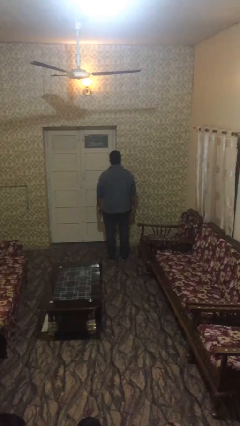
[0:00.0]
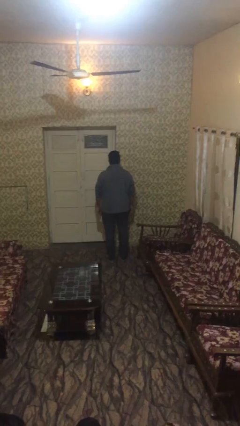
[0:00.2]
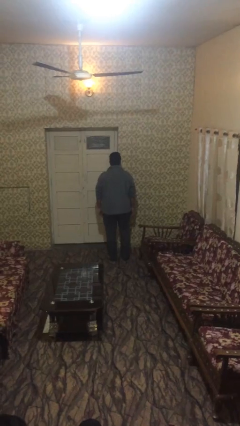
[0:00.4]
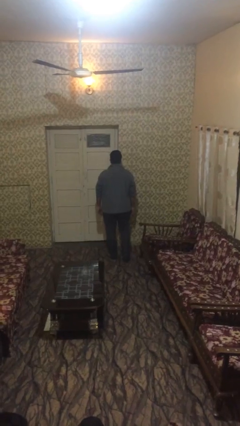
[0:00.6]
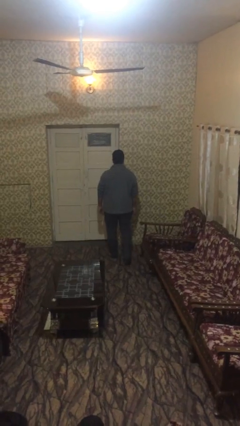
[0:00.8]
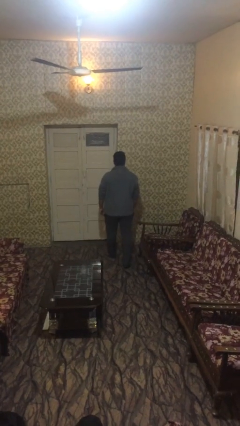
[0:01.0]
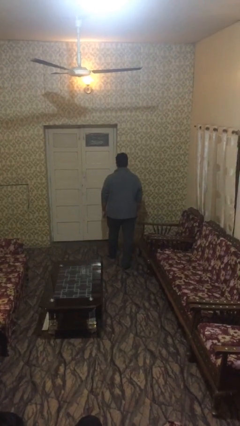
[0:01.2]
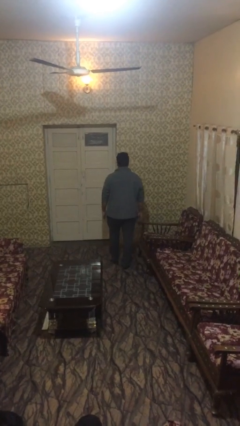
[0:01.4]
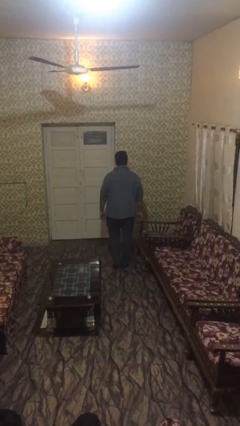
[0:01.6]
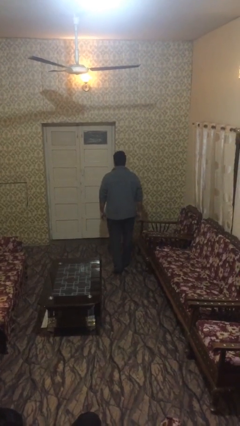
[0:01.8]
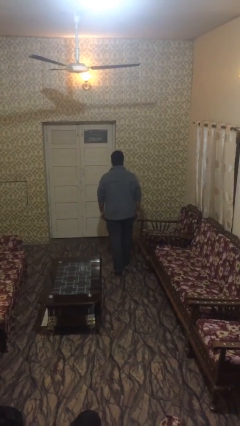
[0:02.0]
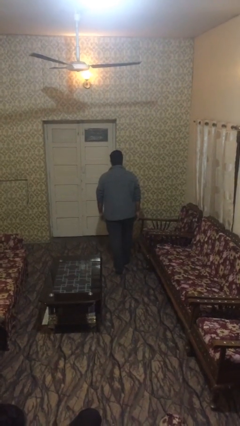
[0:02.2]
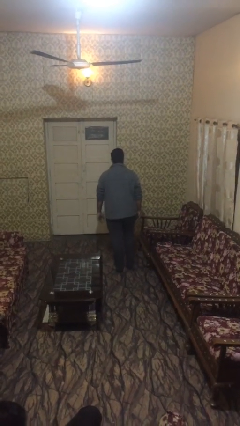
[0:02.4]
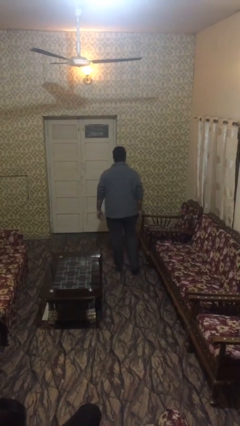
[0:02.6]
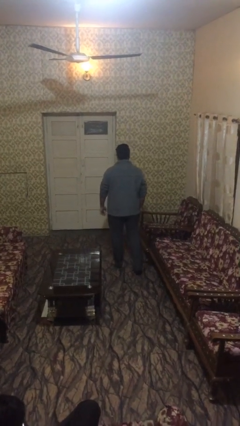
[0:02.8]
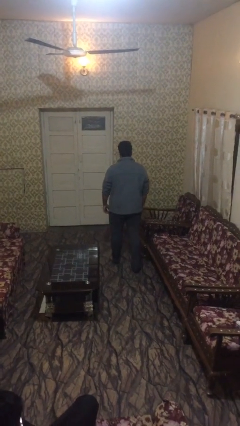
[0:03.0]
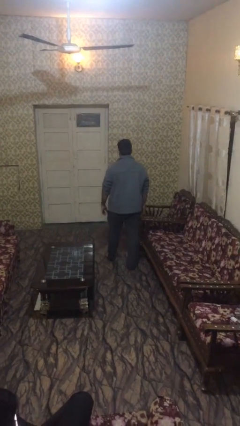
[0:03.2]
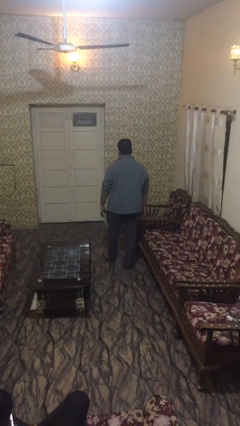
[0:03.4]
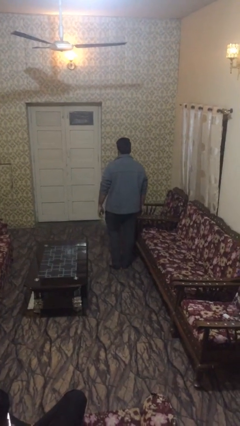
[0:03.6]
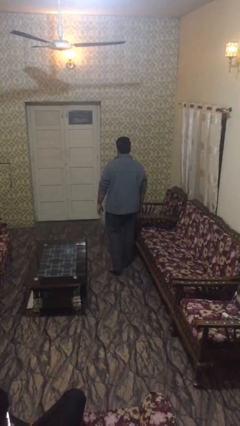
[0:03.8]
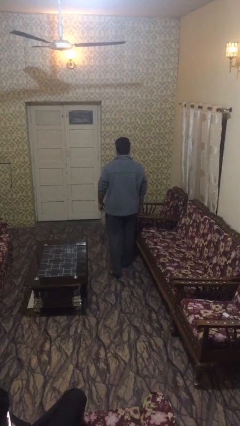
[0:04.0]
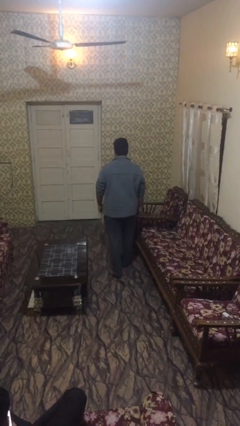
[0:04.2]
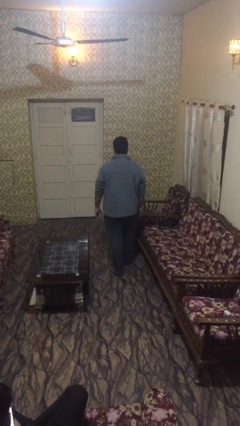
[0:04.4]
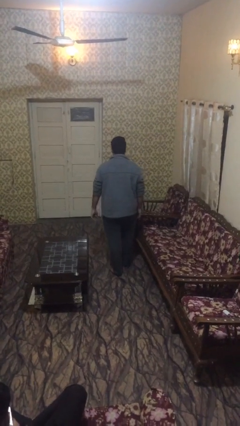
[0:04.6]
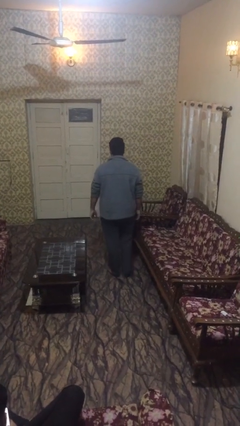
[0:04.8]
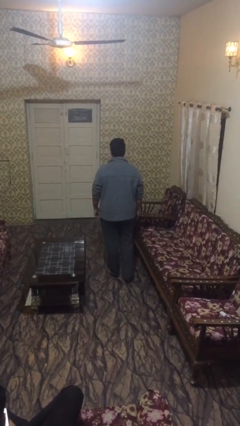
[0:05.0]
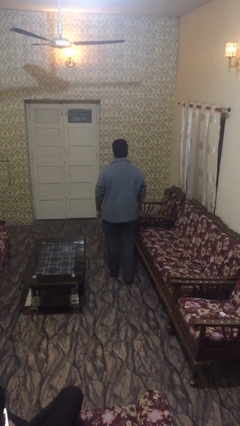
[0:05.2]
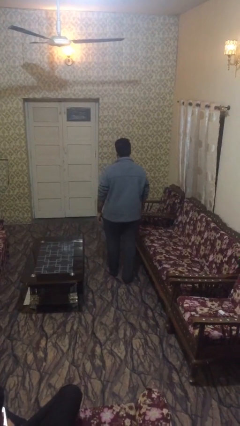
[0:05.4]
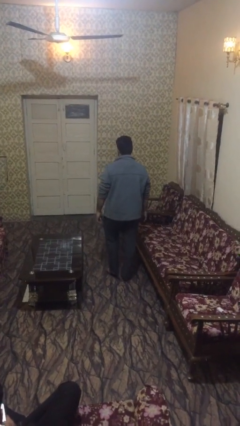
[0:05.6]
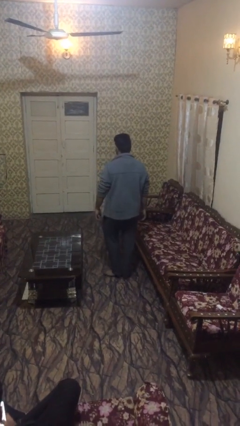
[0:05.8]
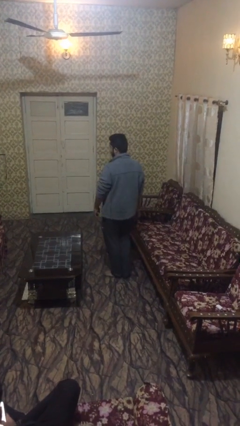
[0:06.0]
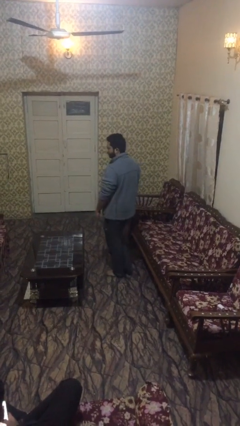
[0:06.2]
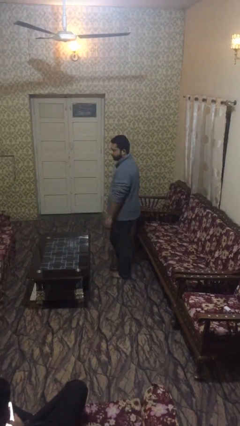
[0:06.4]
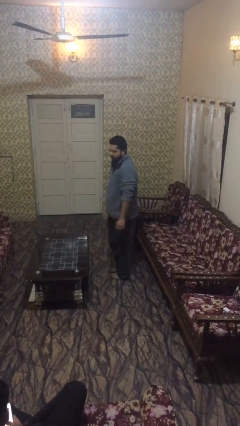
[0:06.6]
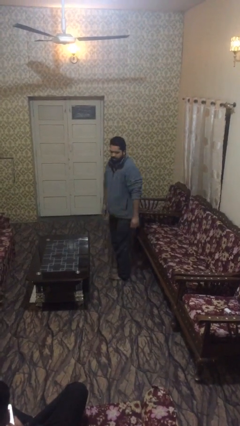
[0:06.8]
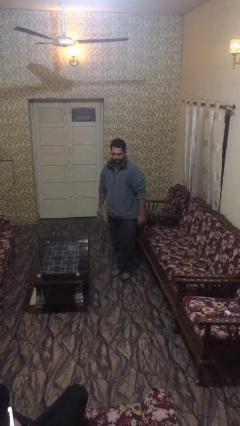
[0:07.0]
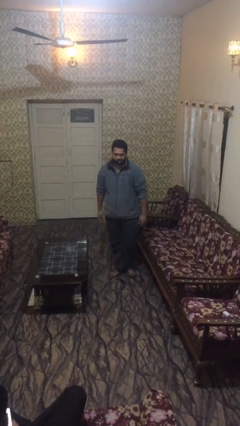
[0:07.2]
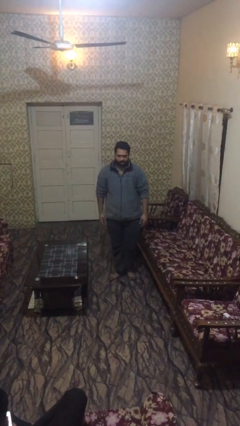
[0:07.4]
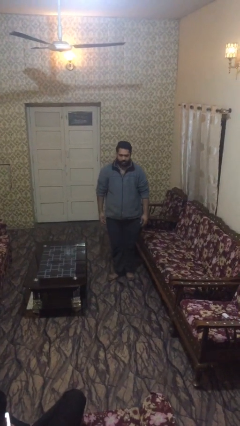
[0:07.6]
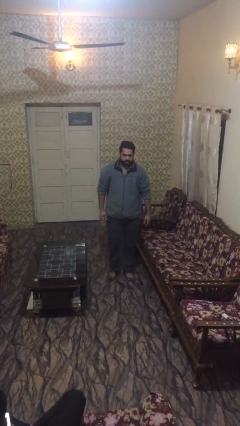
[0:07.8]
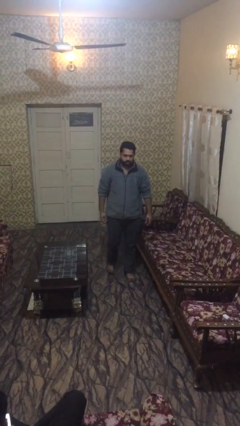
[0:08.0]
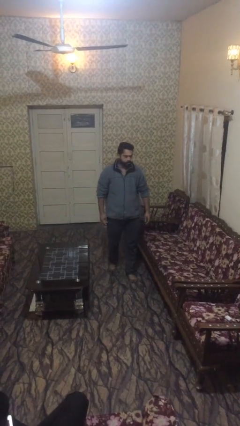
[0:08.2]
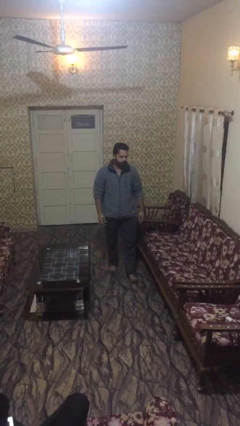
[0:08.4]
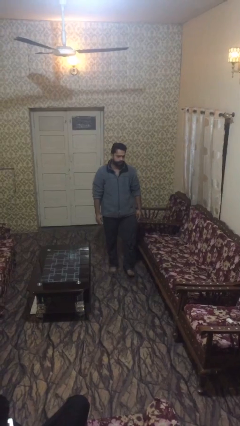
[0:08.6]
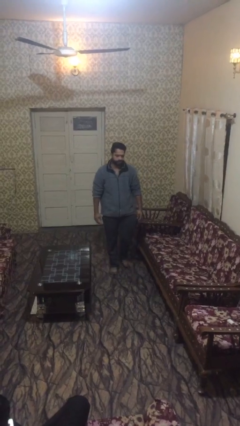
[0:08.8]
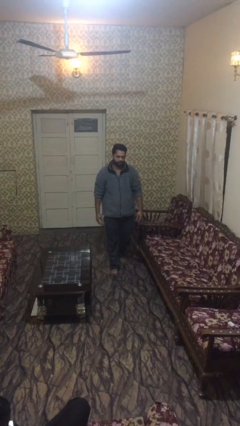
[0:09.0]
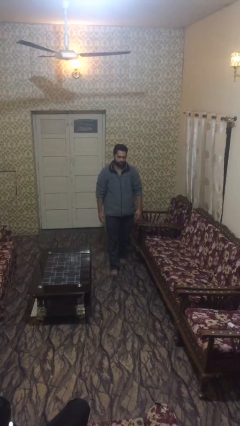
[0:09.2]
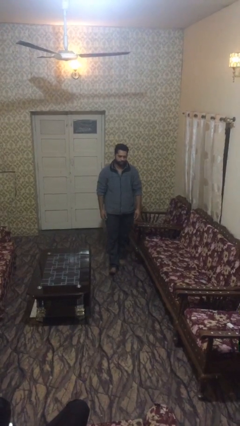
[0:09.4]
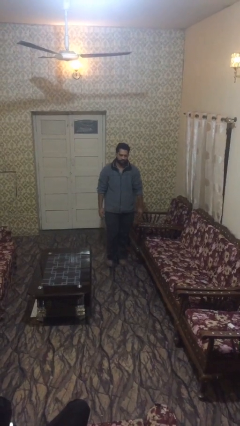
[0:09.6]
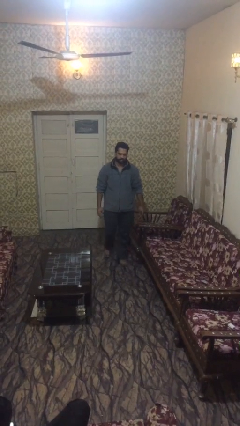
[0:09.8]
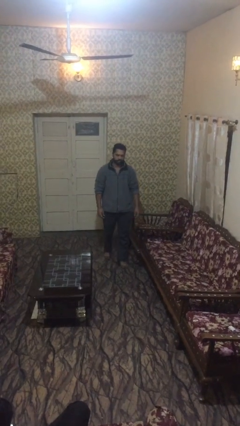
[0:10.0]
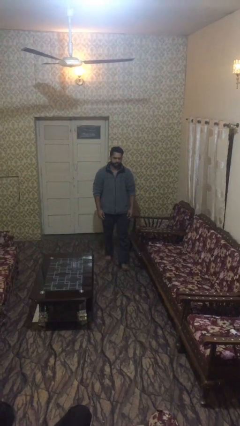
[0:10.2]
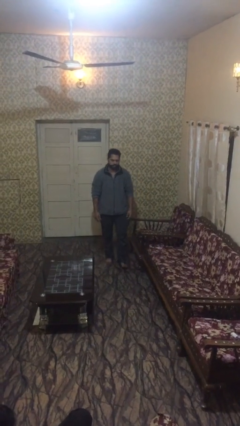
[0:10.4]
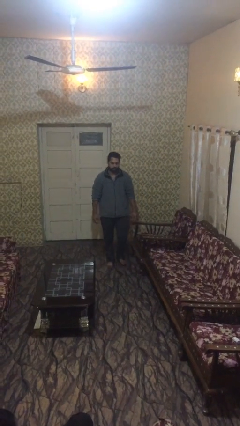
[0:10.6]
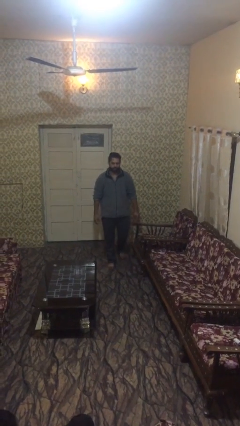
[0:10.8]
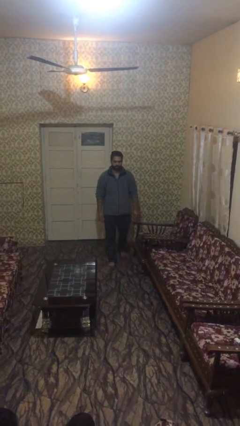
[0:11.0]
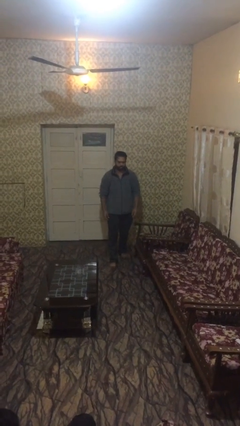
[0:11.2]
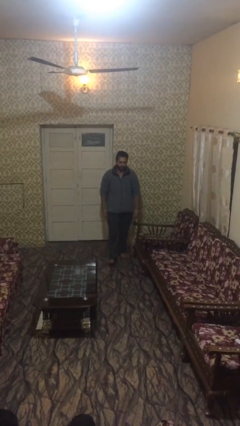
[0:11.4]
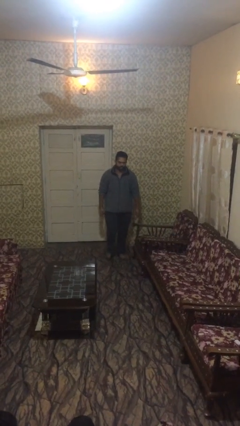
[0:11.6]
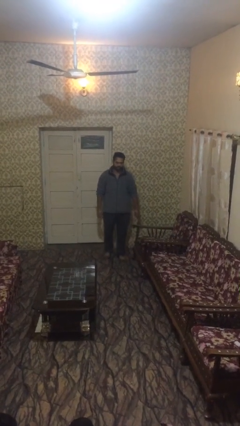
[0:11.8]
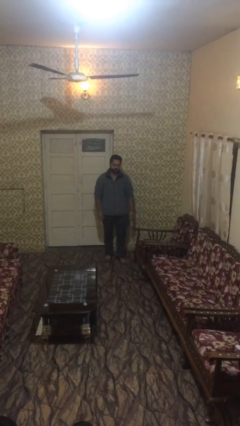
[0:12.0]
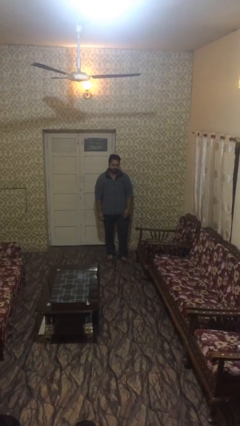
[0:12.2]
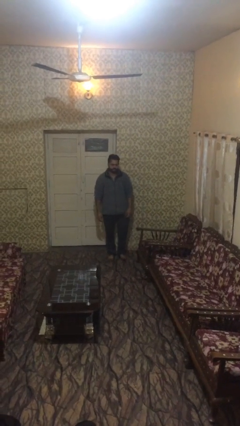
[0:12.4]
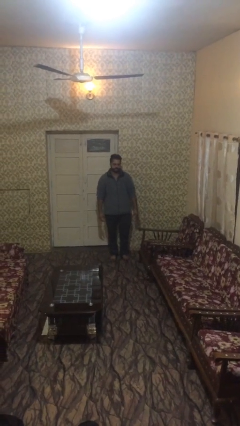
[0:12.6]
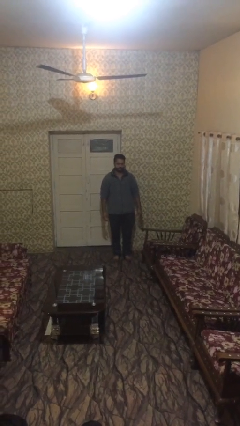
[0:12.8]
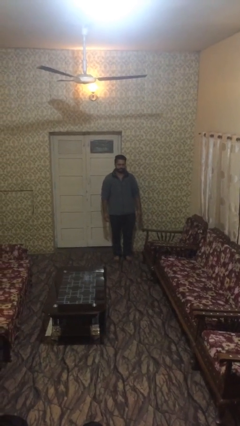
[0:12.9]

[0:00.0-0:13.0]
person walks

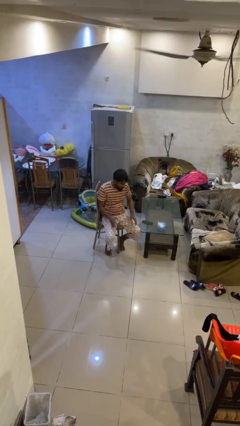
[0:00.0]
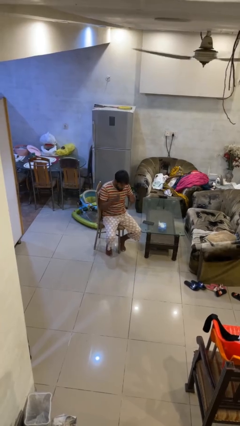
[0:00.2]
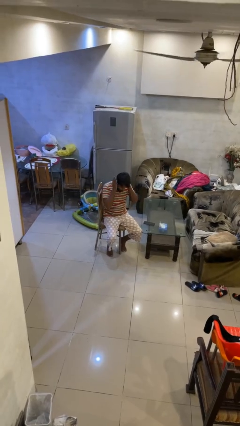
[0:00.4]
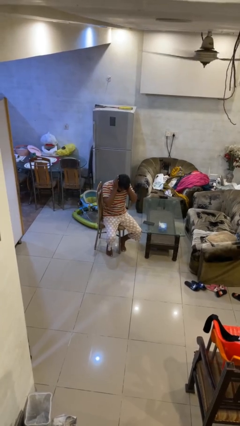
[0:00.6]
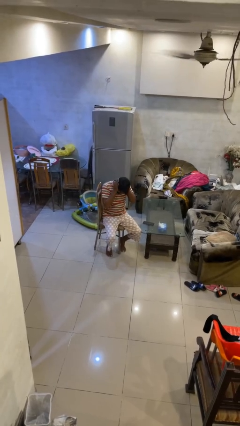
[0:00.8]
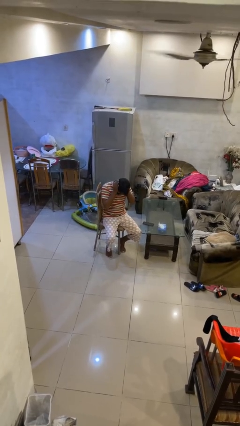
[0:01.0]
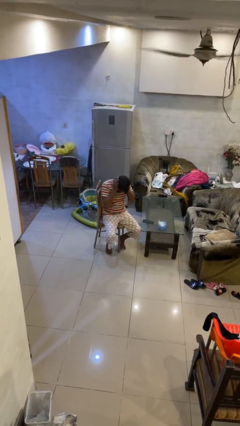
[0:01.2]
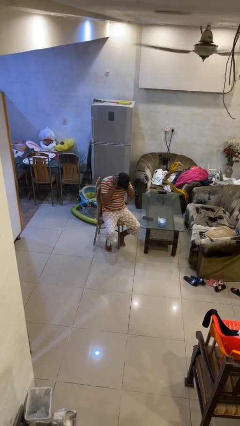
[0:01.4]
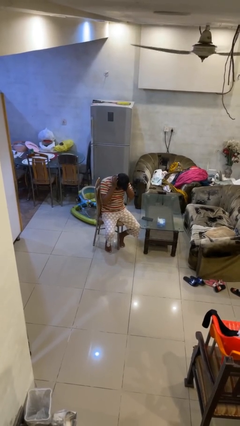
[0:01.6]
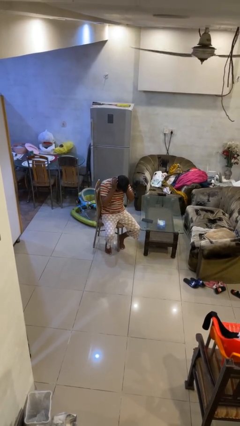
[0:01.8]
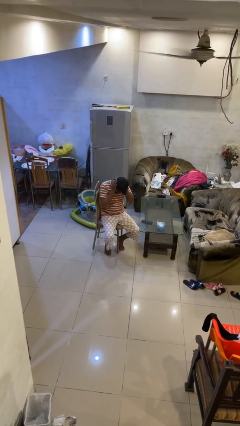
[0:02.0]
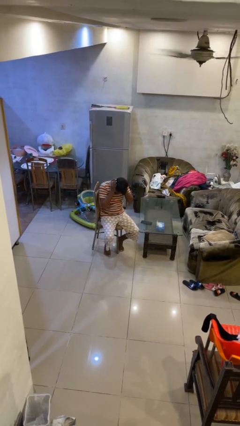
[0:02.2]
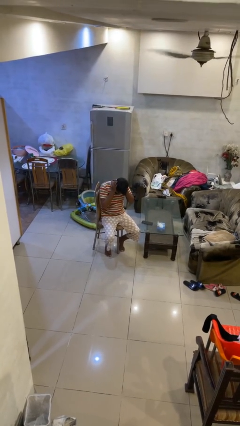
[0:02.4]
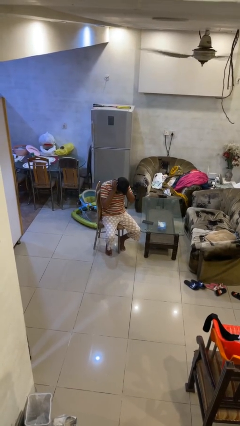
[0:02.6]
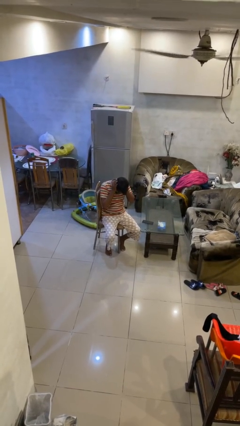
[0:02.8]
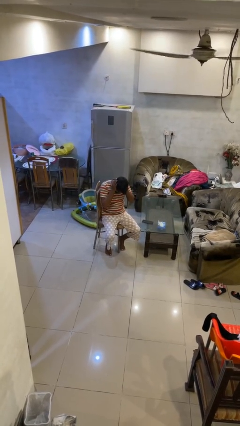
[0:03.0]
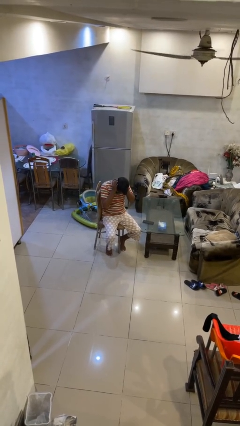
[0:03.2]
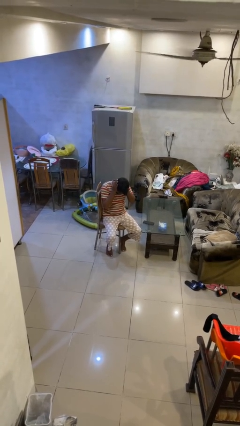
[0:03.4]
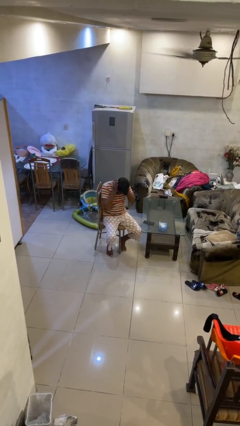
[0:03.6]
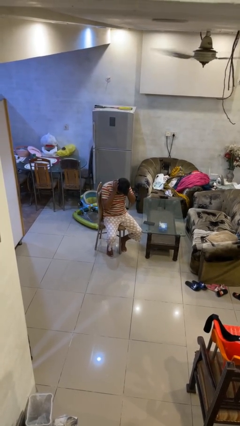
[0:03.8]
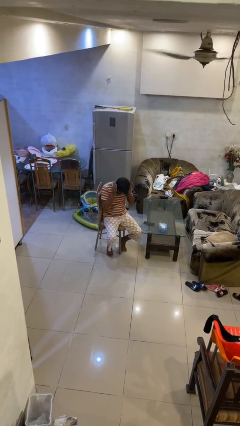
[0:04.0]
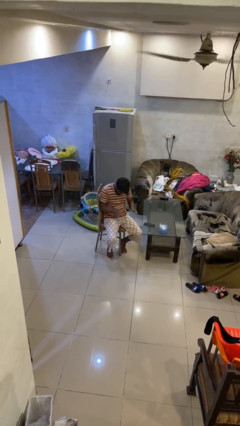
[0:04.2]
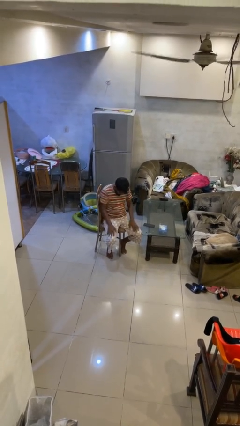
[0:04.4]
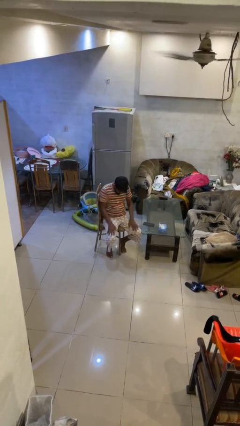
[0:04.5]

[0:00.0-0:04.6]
person puts fingers in ear

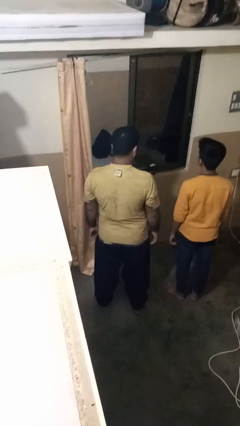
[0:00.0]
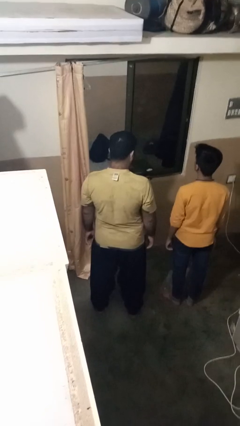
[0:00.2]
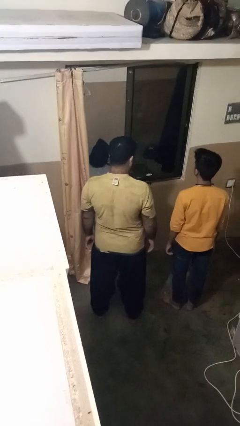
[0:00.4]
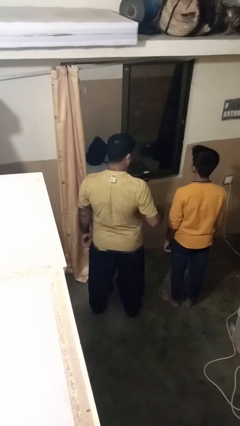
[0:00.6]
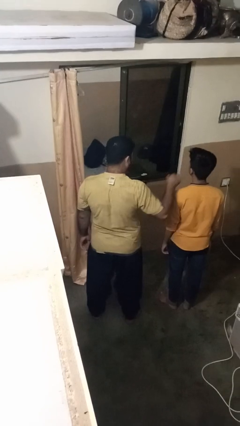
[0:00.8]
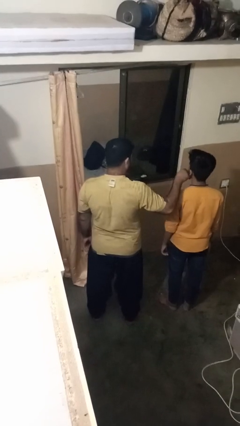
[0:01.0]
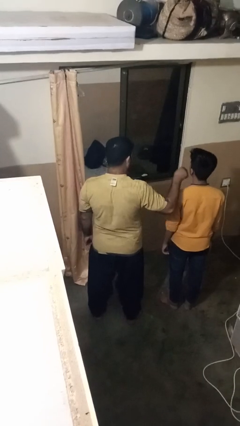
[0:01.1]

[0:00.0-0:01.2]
person touches face of person
